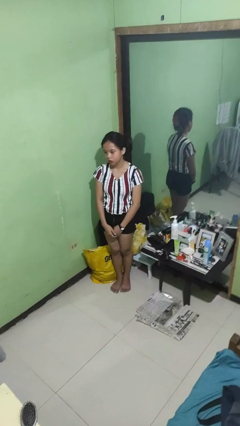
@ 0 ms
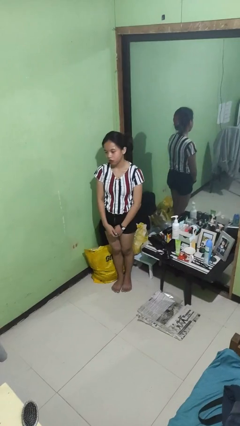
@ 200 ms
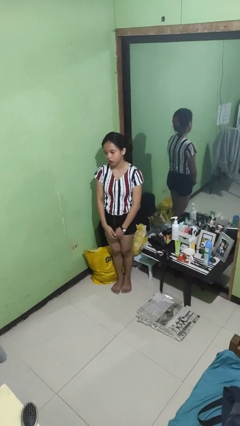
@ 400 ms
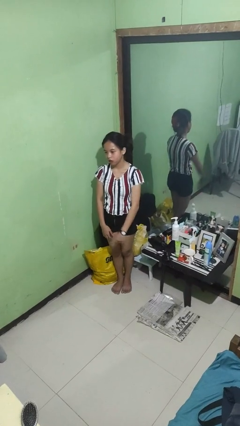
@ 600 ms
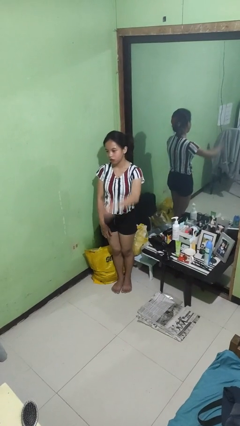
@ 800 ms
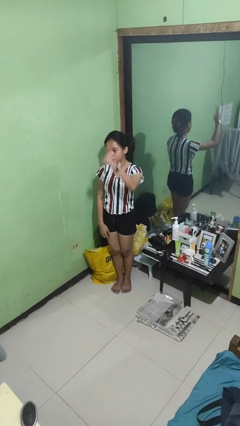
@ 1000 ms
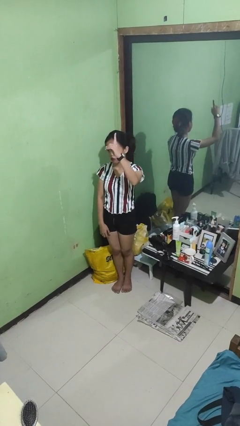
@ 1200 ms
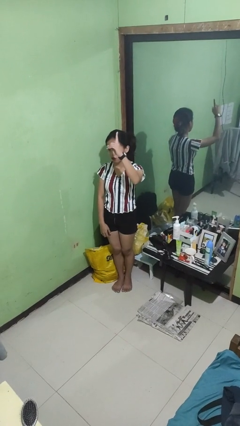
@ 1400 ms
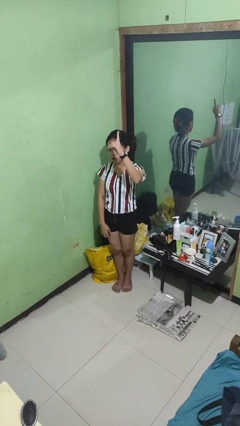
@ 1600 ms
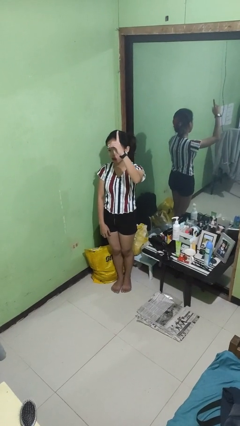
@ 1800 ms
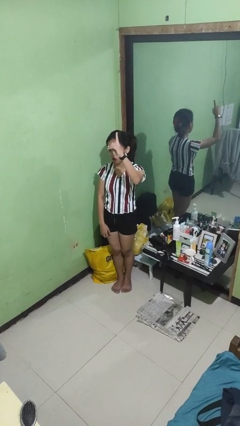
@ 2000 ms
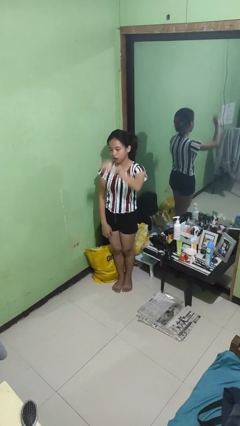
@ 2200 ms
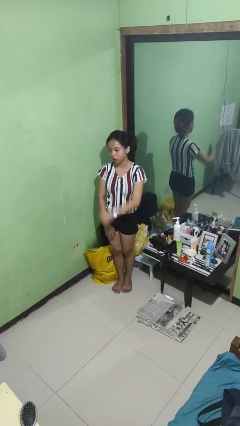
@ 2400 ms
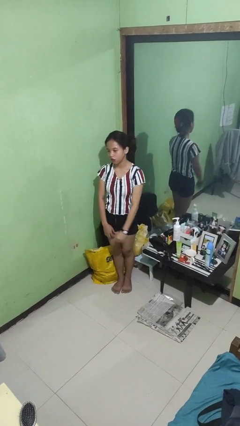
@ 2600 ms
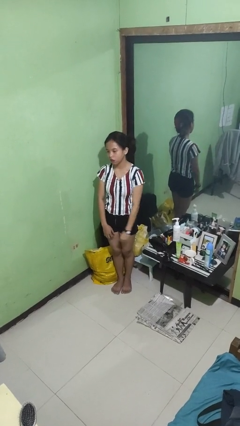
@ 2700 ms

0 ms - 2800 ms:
person gestures number one

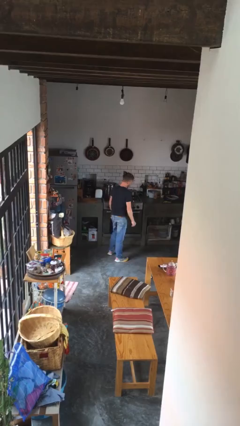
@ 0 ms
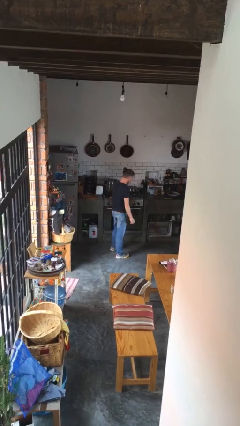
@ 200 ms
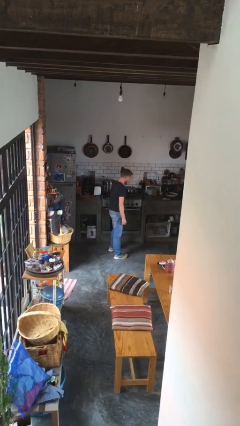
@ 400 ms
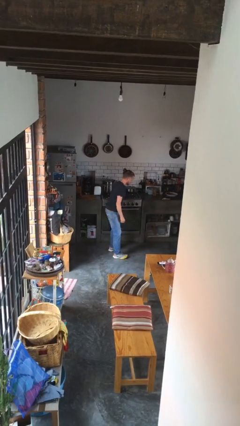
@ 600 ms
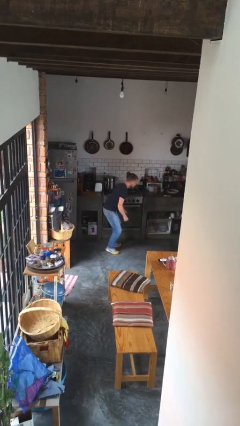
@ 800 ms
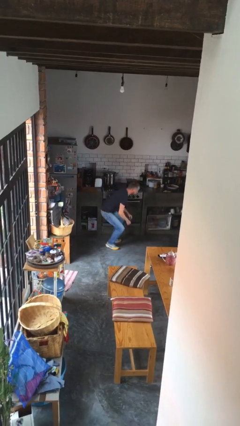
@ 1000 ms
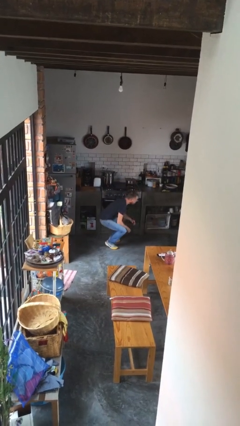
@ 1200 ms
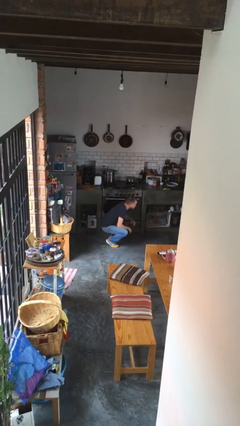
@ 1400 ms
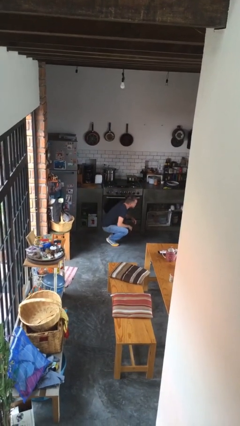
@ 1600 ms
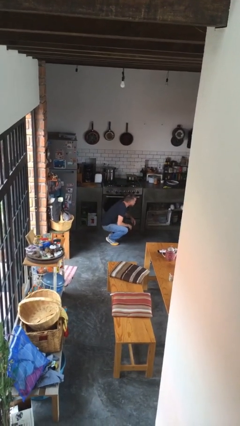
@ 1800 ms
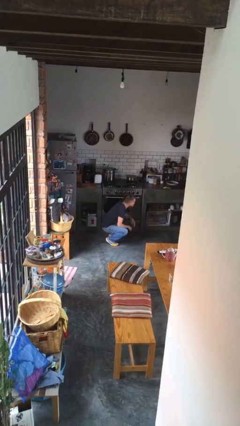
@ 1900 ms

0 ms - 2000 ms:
person squats

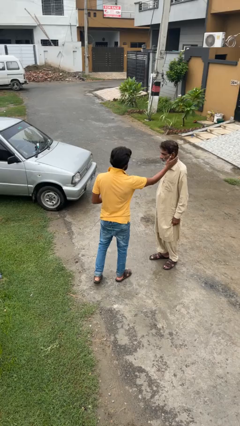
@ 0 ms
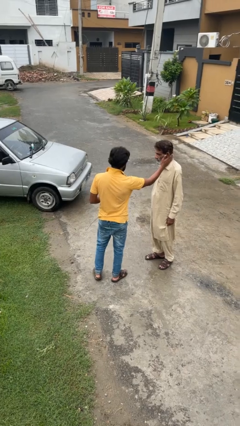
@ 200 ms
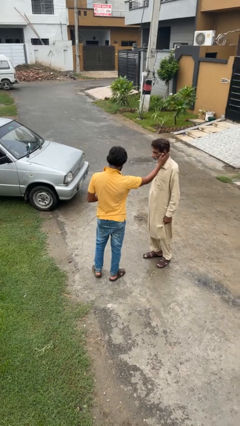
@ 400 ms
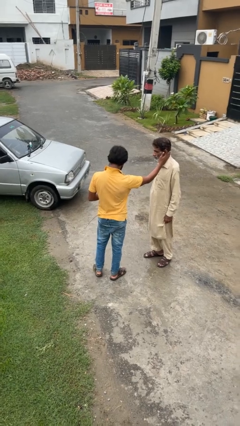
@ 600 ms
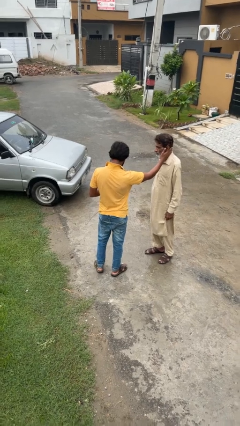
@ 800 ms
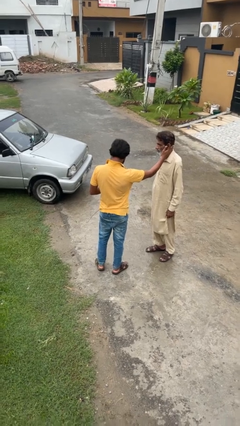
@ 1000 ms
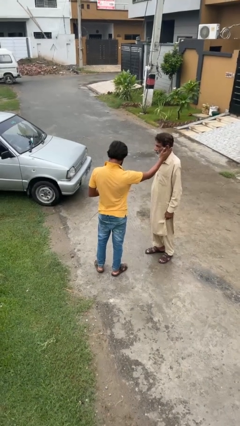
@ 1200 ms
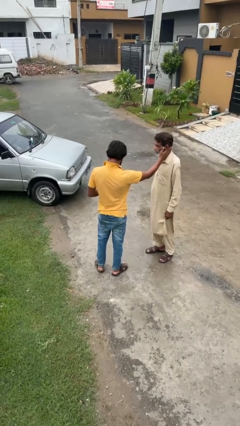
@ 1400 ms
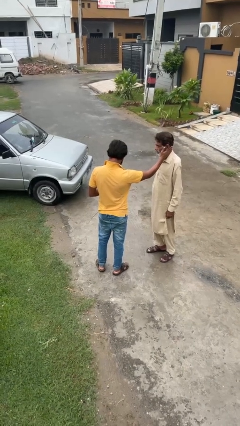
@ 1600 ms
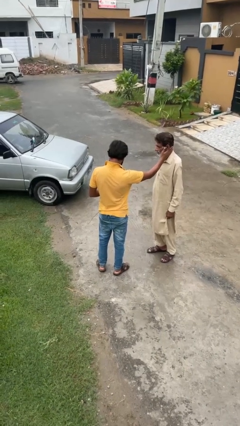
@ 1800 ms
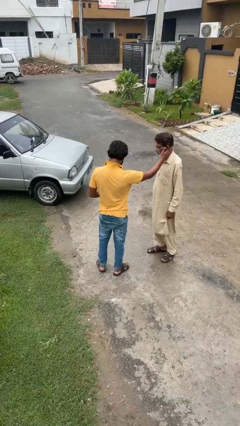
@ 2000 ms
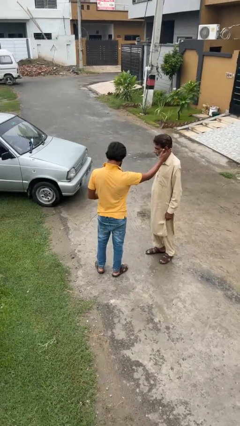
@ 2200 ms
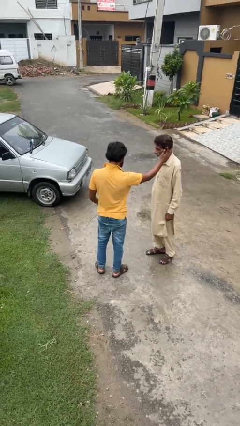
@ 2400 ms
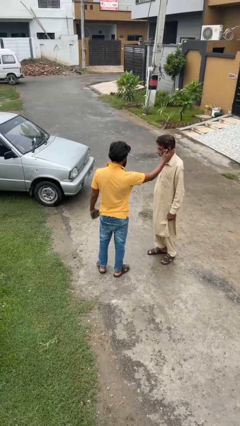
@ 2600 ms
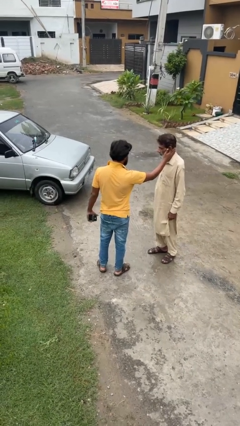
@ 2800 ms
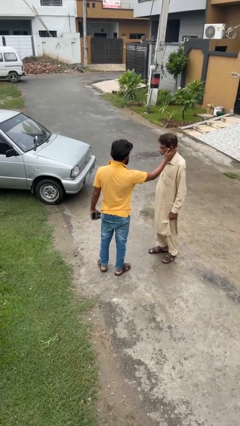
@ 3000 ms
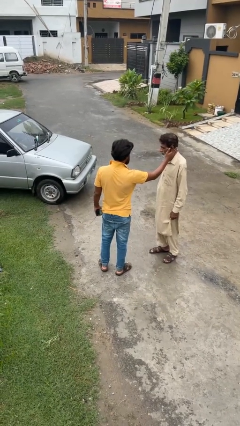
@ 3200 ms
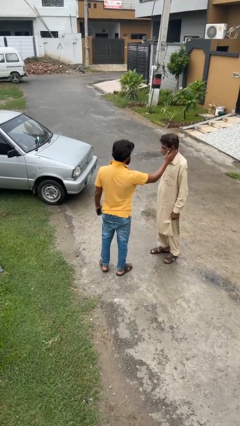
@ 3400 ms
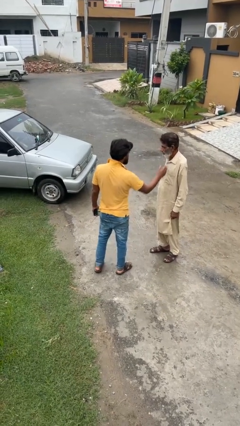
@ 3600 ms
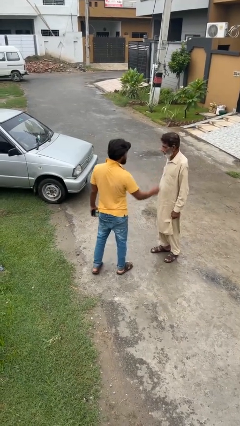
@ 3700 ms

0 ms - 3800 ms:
person touches face of person

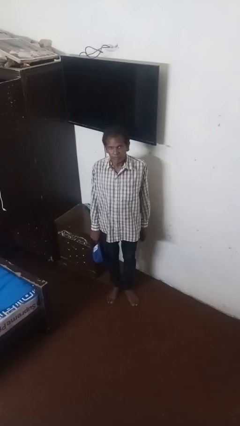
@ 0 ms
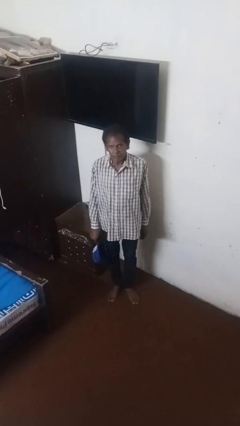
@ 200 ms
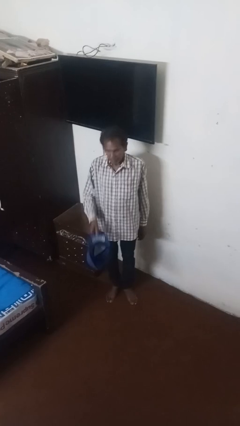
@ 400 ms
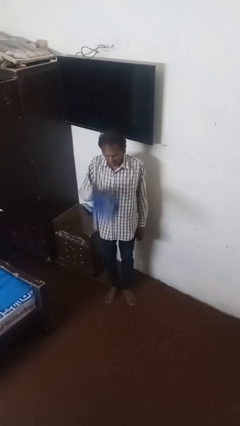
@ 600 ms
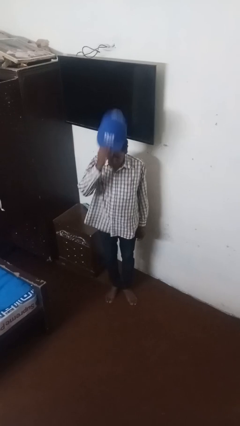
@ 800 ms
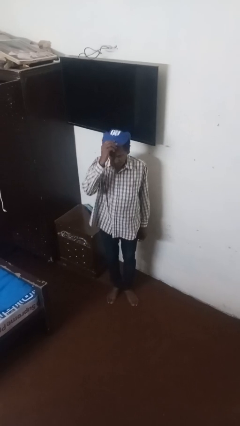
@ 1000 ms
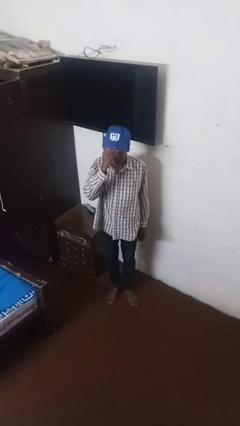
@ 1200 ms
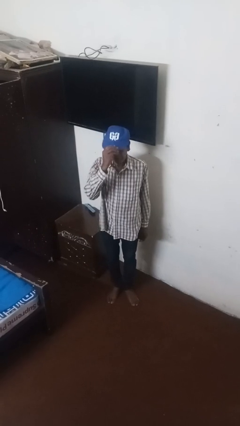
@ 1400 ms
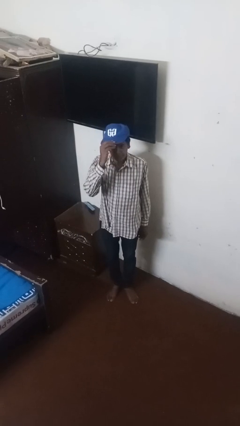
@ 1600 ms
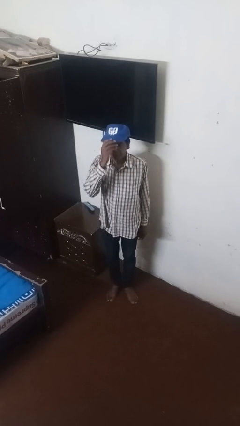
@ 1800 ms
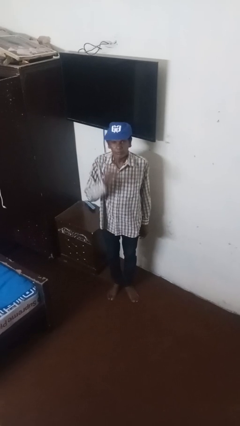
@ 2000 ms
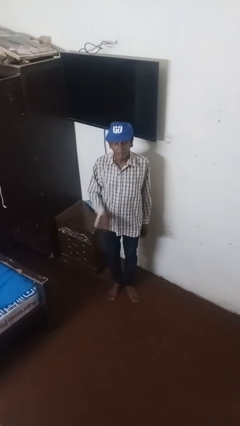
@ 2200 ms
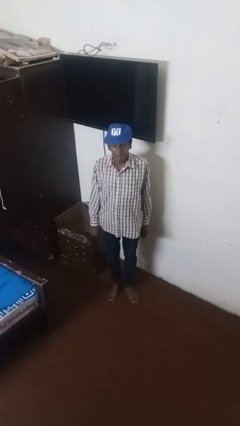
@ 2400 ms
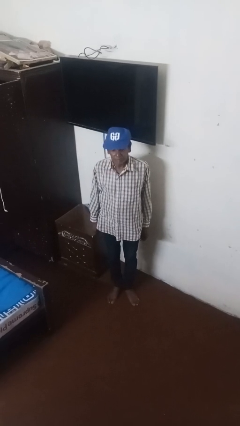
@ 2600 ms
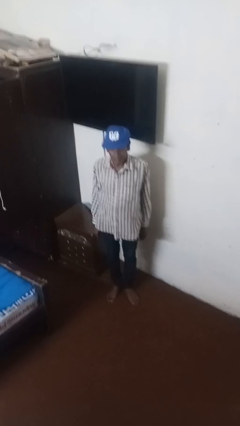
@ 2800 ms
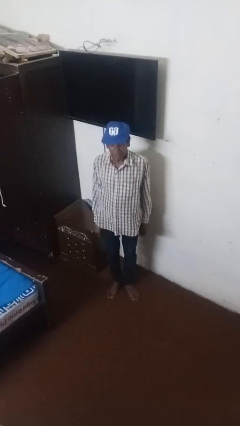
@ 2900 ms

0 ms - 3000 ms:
person puts on hat

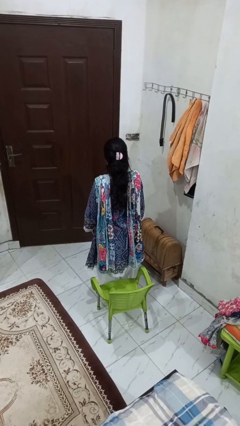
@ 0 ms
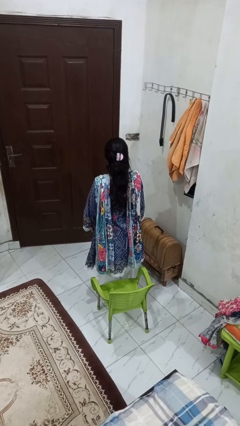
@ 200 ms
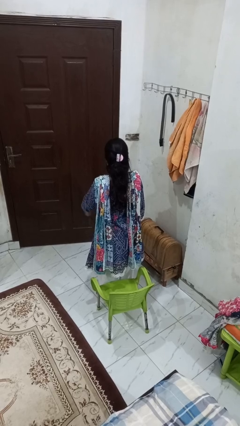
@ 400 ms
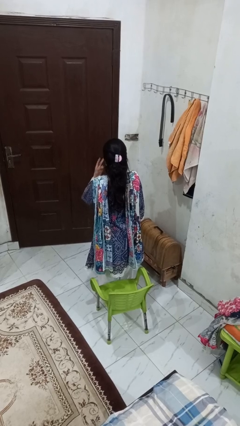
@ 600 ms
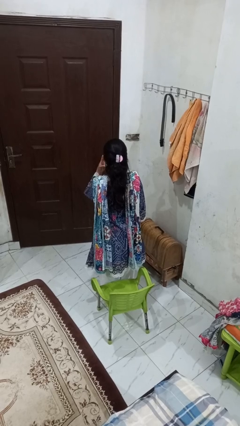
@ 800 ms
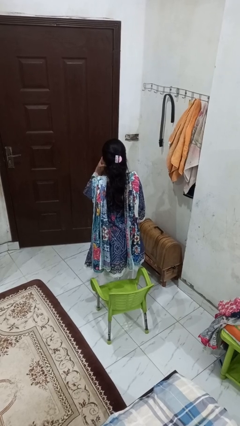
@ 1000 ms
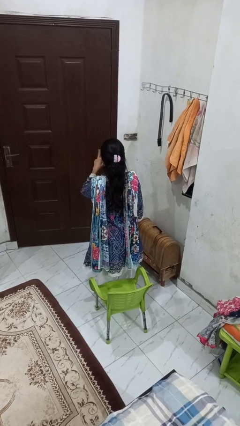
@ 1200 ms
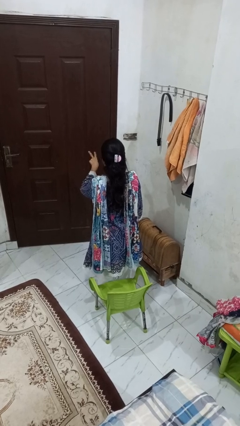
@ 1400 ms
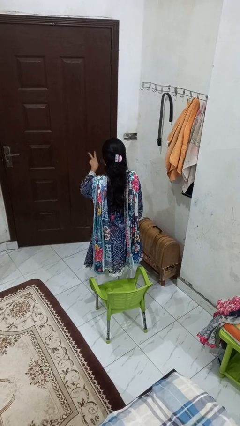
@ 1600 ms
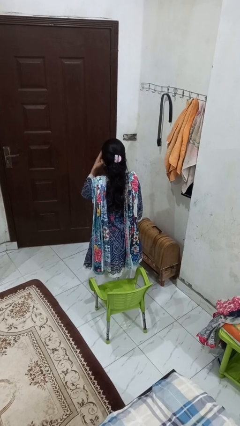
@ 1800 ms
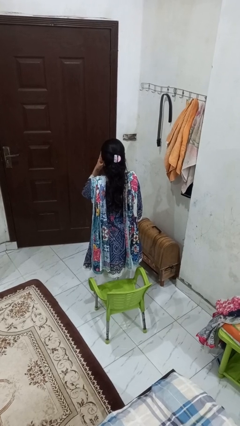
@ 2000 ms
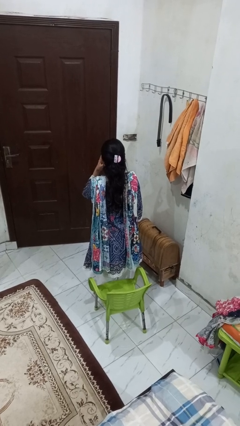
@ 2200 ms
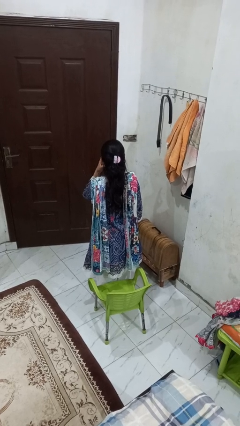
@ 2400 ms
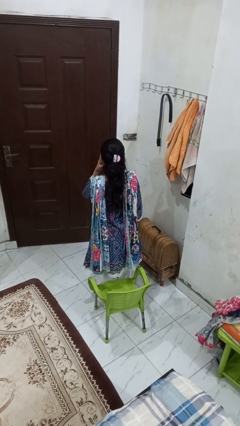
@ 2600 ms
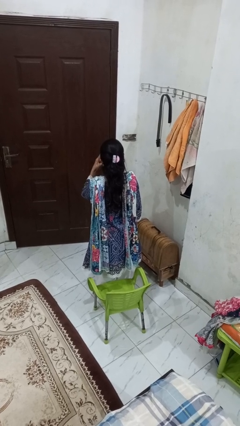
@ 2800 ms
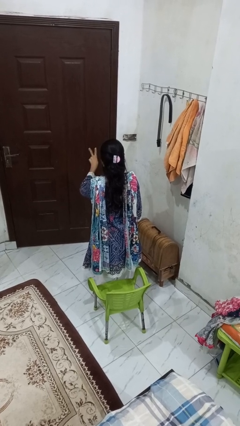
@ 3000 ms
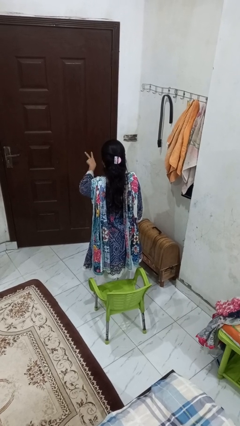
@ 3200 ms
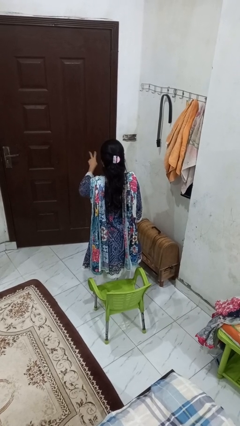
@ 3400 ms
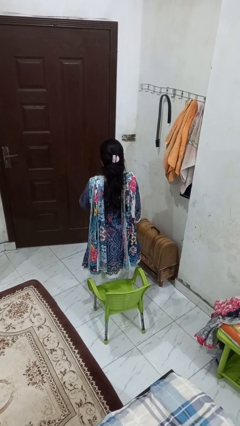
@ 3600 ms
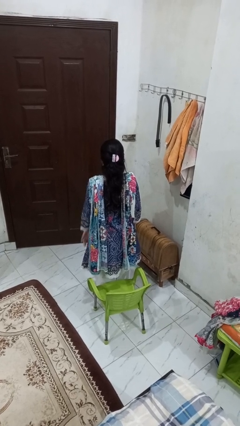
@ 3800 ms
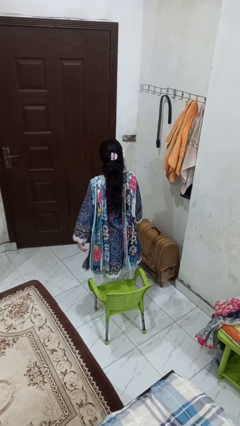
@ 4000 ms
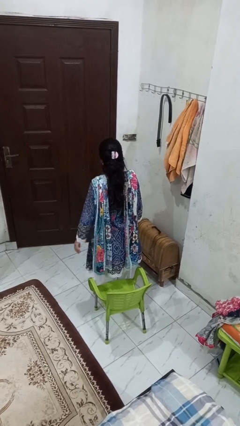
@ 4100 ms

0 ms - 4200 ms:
person gestures watch closely

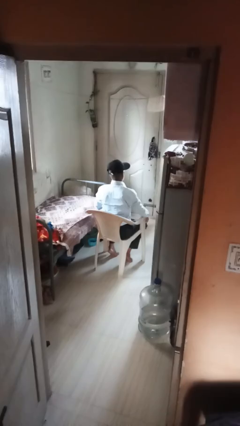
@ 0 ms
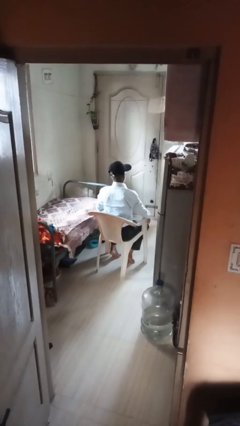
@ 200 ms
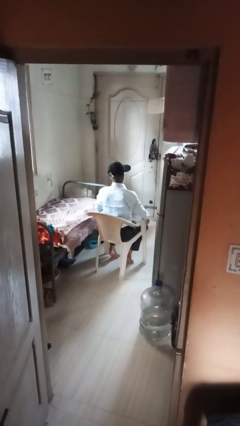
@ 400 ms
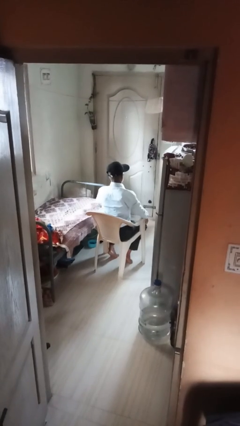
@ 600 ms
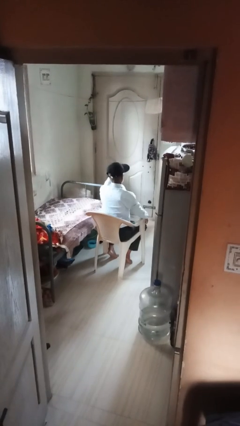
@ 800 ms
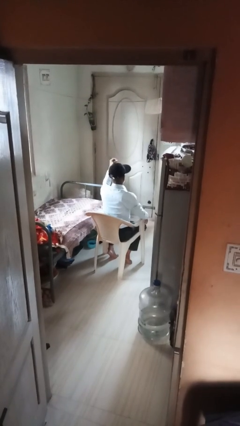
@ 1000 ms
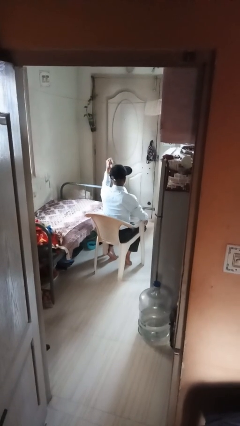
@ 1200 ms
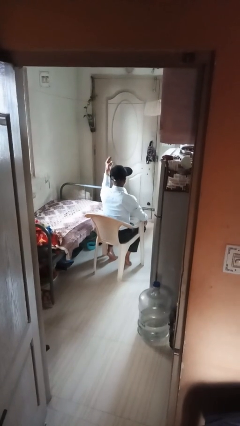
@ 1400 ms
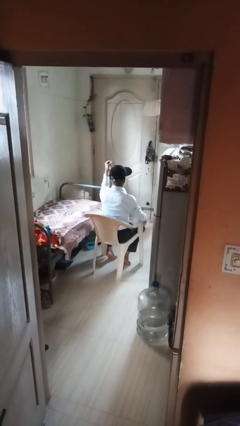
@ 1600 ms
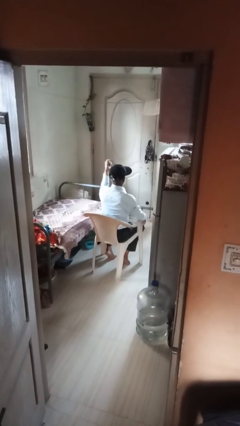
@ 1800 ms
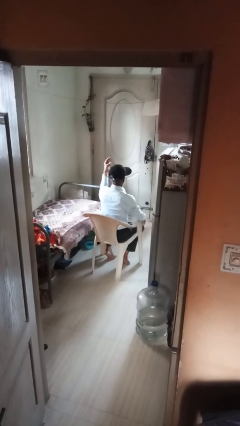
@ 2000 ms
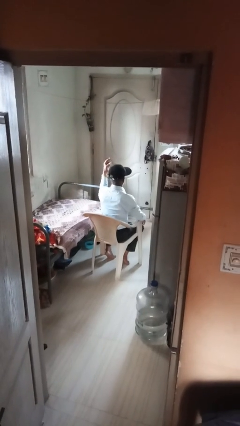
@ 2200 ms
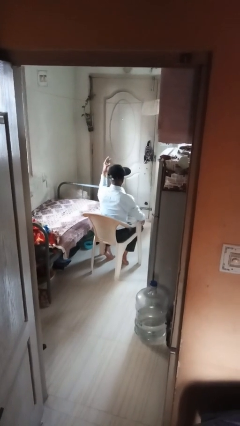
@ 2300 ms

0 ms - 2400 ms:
person snaps fingers
